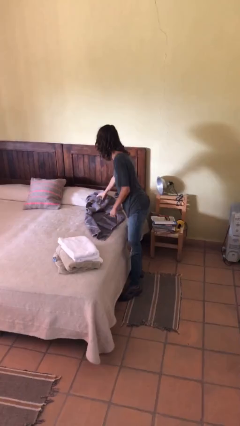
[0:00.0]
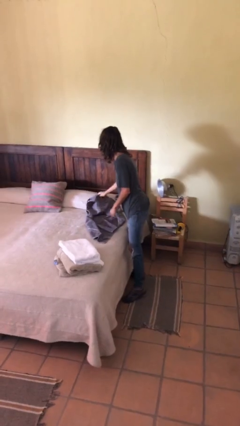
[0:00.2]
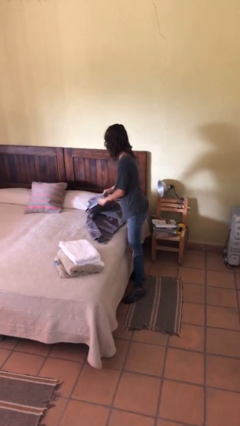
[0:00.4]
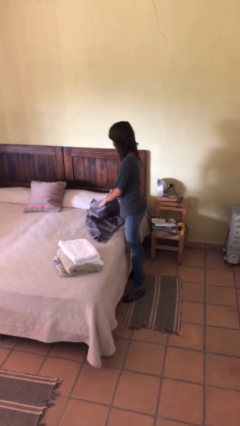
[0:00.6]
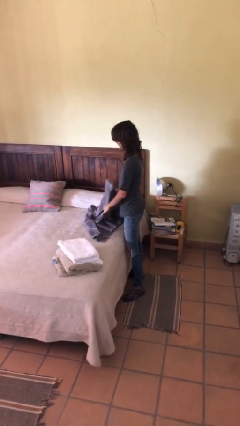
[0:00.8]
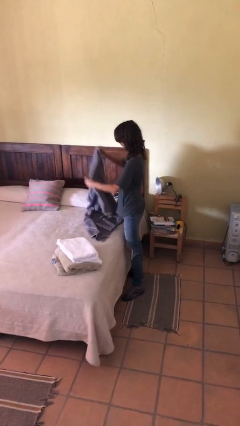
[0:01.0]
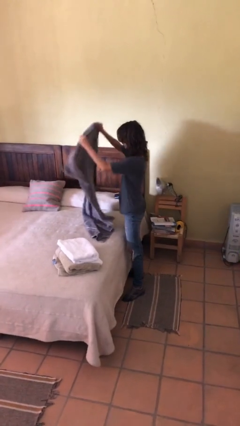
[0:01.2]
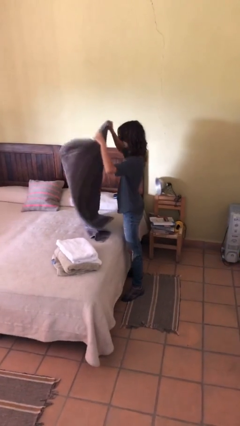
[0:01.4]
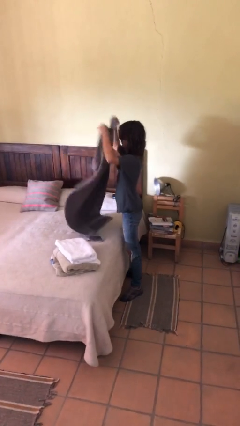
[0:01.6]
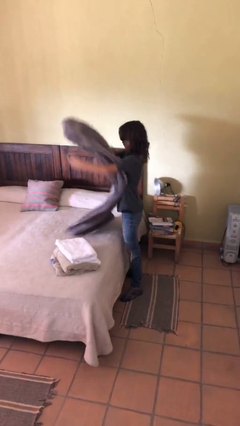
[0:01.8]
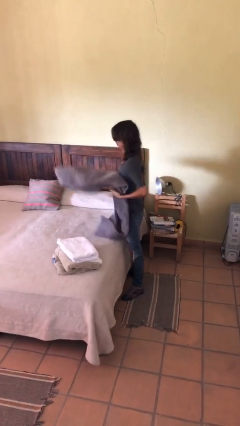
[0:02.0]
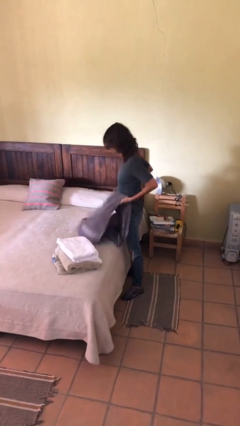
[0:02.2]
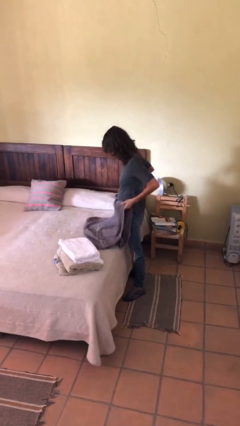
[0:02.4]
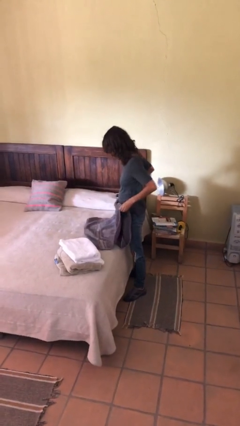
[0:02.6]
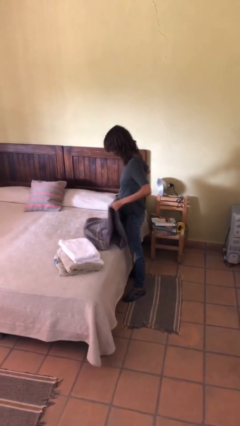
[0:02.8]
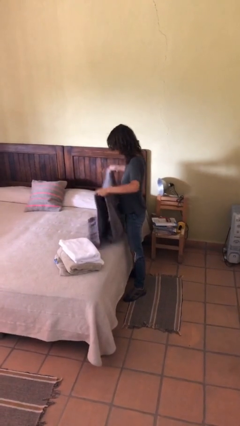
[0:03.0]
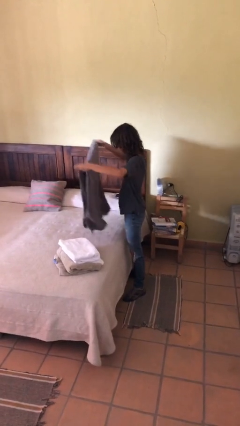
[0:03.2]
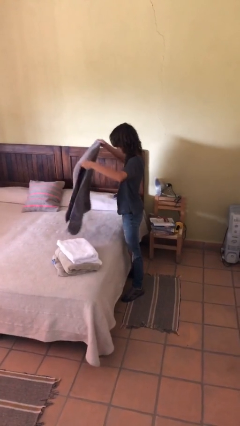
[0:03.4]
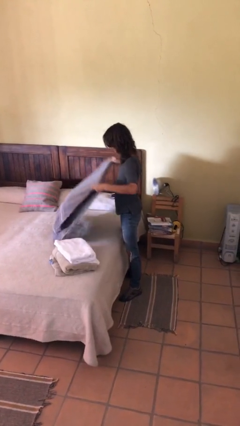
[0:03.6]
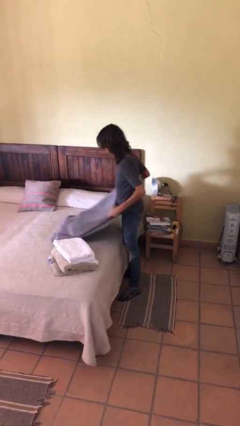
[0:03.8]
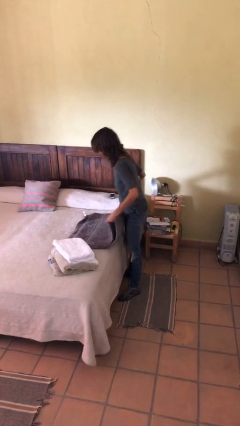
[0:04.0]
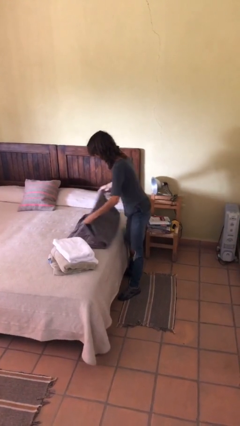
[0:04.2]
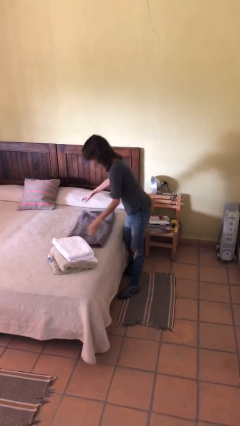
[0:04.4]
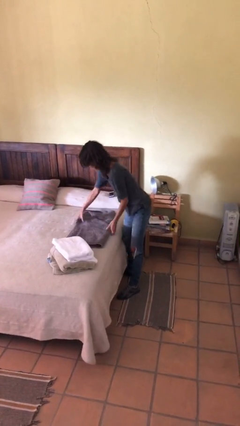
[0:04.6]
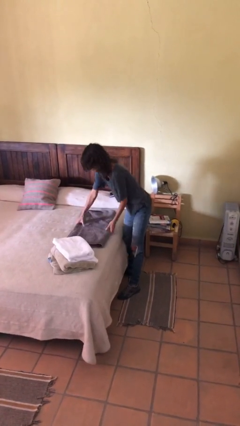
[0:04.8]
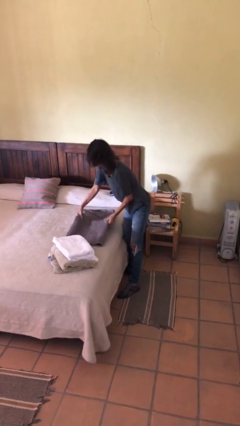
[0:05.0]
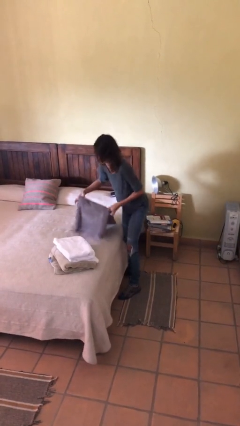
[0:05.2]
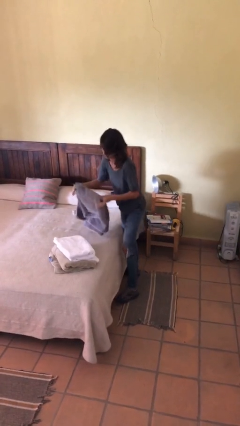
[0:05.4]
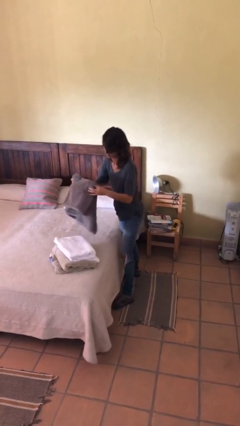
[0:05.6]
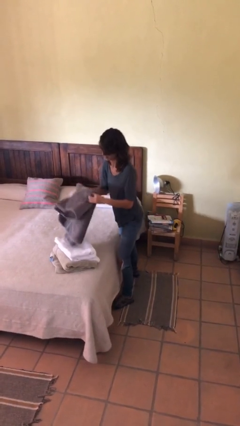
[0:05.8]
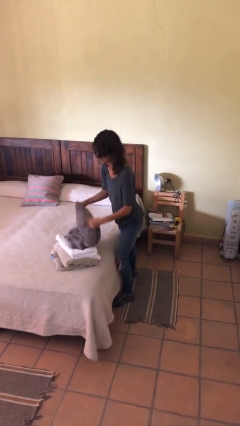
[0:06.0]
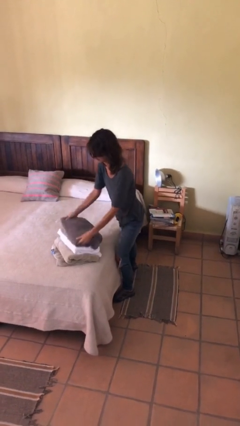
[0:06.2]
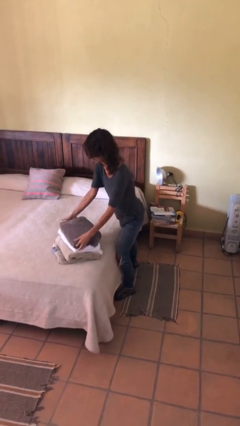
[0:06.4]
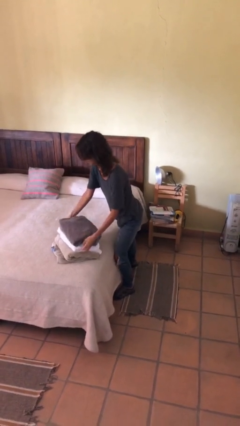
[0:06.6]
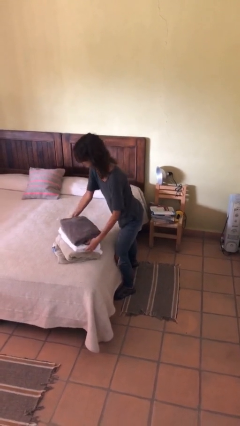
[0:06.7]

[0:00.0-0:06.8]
person folds towel

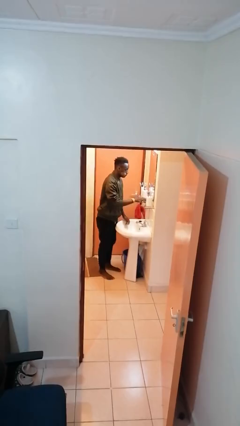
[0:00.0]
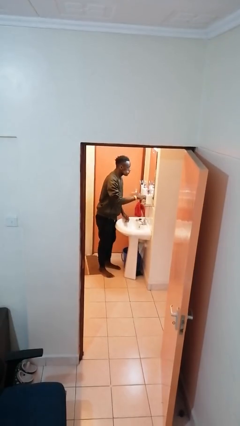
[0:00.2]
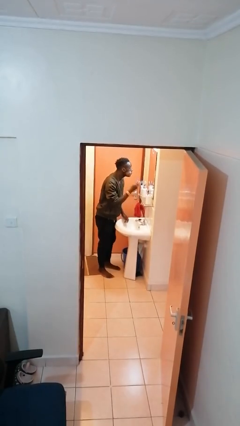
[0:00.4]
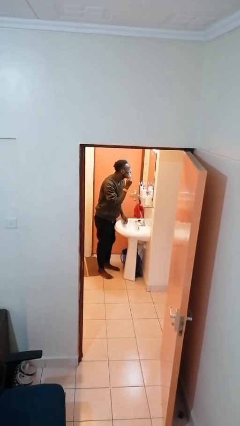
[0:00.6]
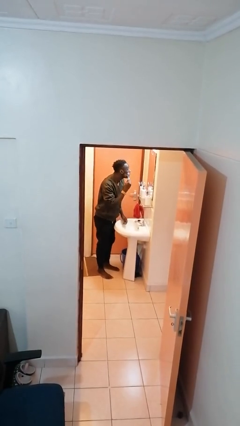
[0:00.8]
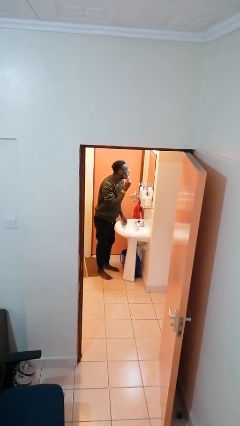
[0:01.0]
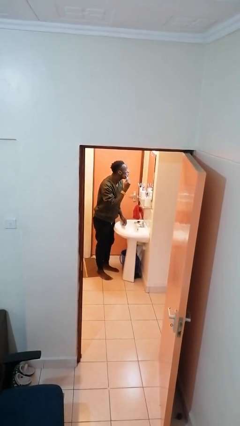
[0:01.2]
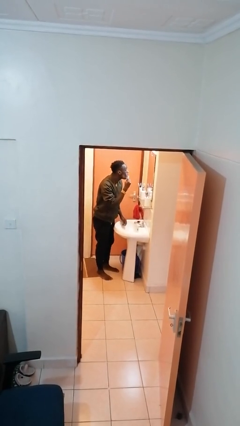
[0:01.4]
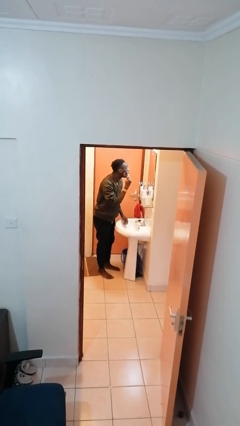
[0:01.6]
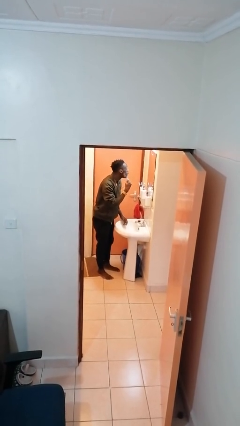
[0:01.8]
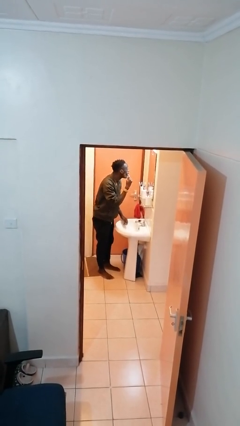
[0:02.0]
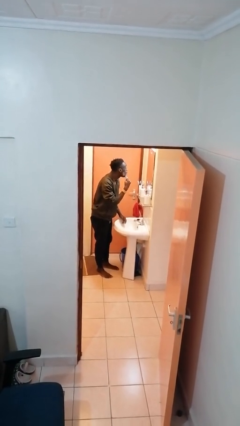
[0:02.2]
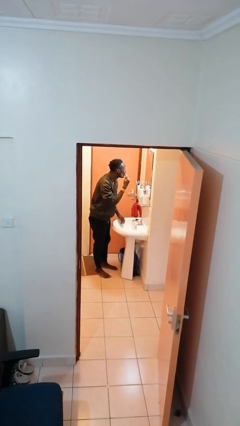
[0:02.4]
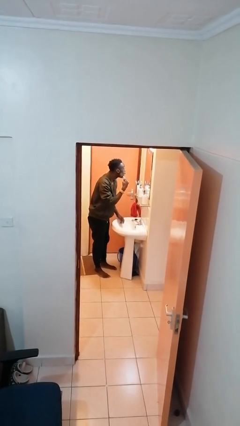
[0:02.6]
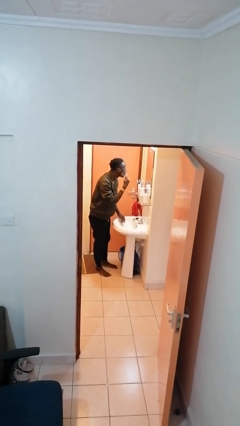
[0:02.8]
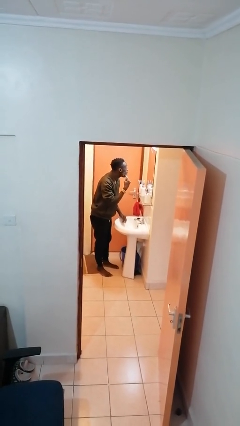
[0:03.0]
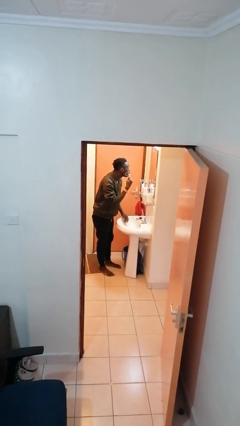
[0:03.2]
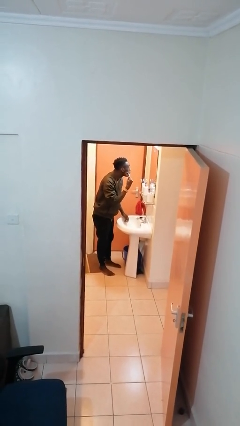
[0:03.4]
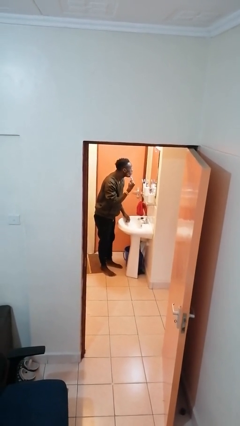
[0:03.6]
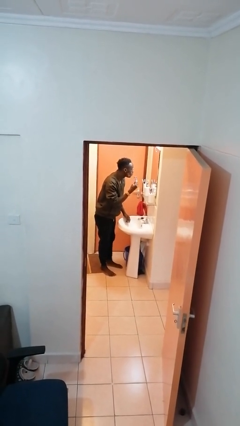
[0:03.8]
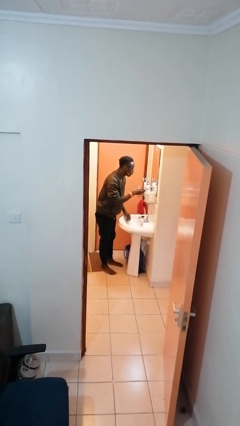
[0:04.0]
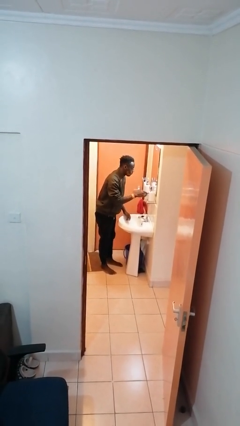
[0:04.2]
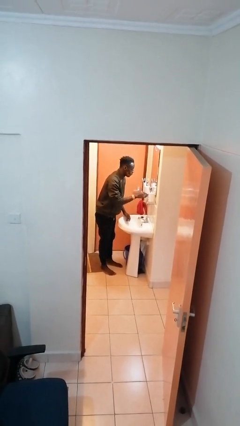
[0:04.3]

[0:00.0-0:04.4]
person shaves face

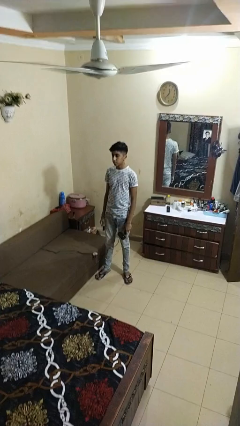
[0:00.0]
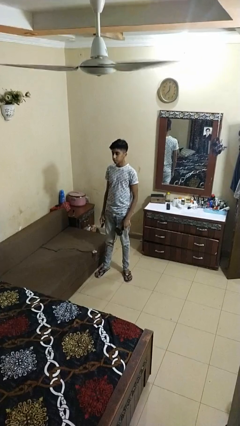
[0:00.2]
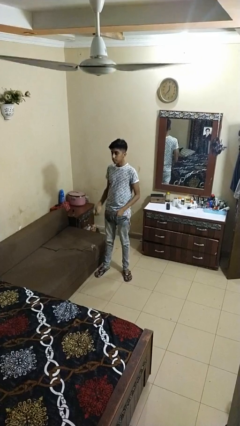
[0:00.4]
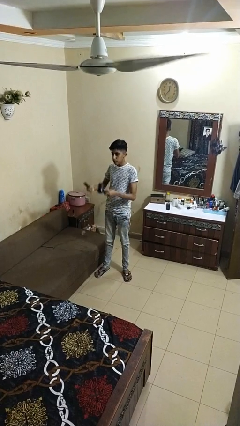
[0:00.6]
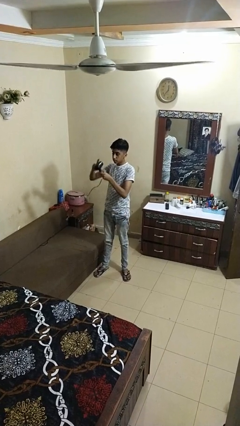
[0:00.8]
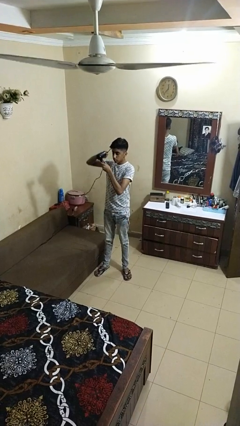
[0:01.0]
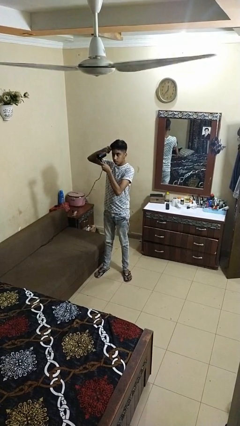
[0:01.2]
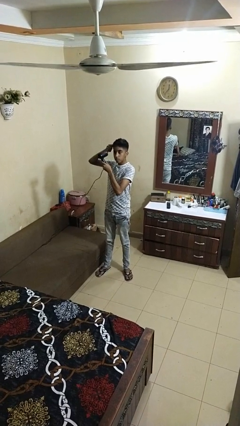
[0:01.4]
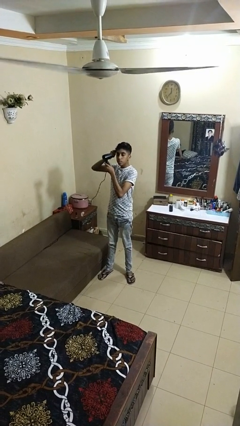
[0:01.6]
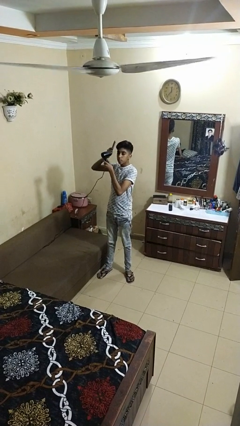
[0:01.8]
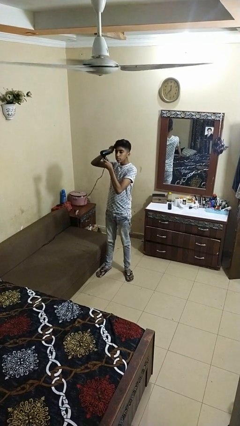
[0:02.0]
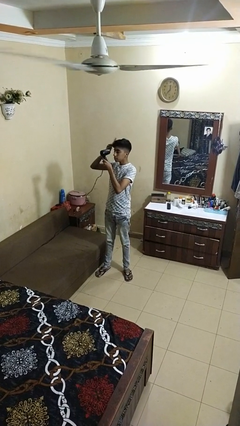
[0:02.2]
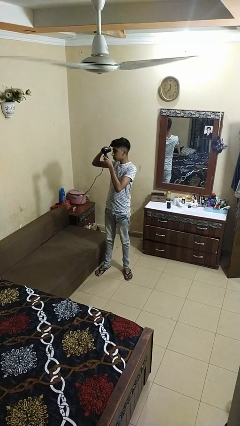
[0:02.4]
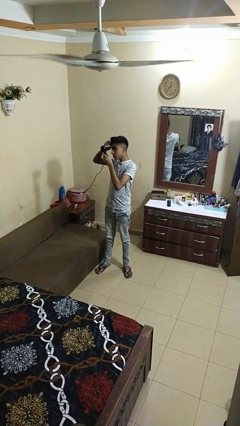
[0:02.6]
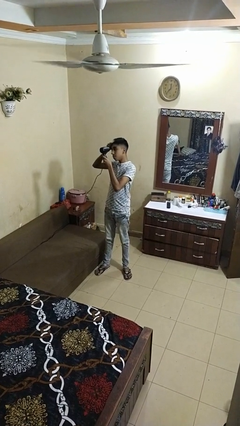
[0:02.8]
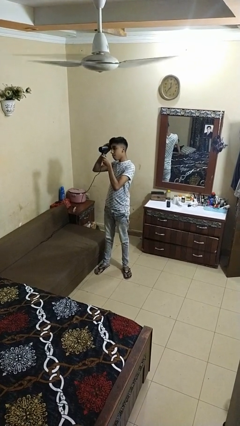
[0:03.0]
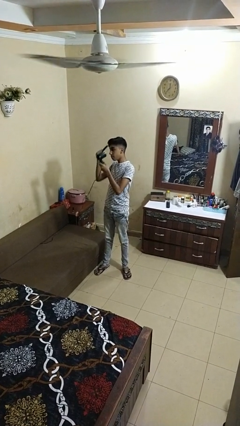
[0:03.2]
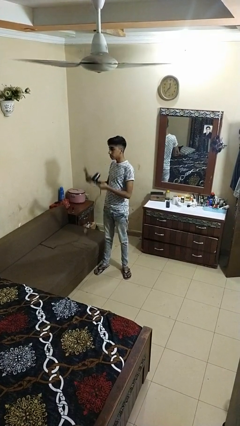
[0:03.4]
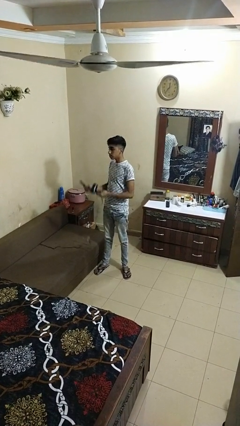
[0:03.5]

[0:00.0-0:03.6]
person dries hair with hairdryer

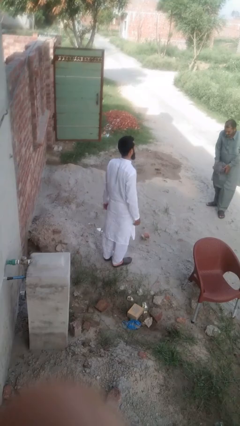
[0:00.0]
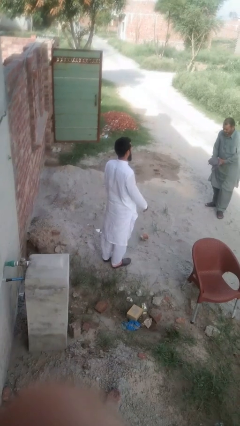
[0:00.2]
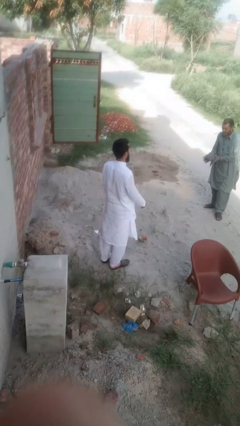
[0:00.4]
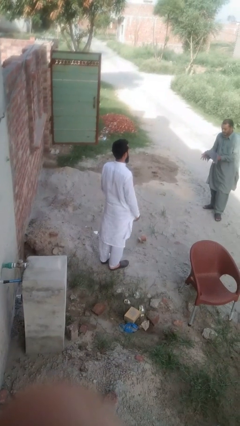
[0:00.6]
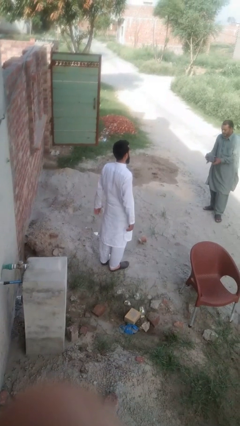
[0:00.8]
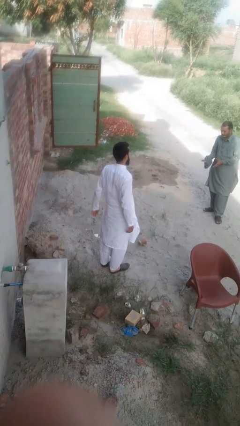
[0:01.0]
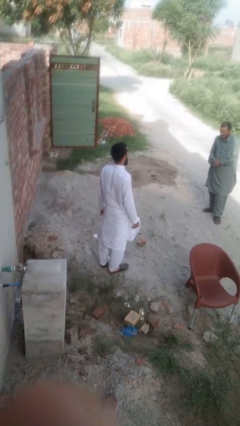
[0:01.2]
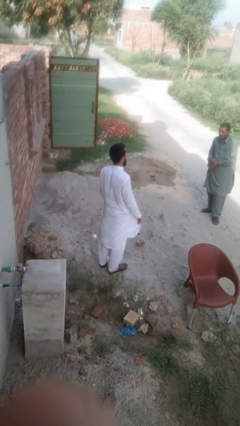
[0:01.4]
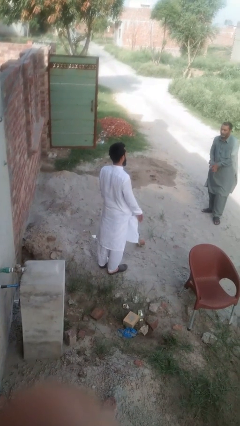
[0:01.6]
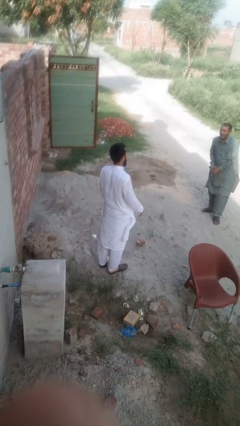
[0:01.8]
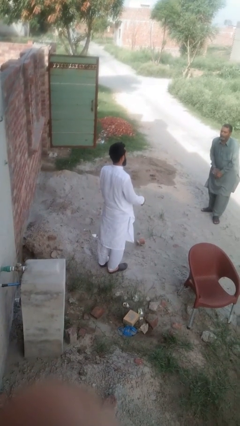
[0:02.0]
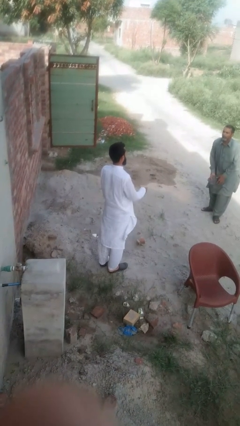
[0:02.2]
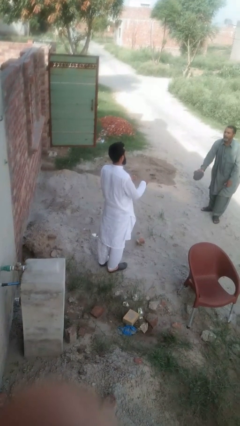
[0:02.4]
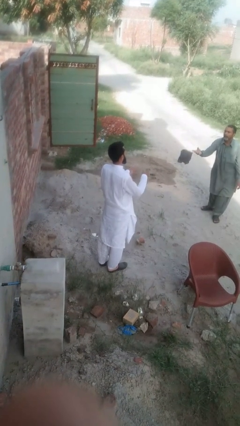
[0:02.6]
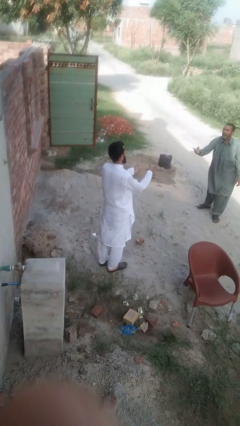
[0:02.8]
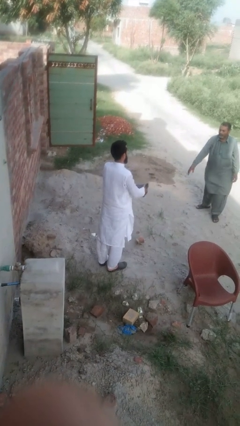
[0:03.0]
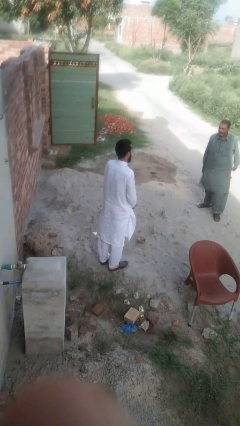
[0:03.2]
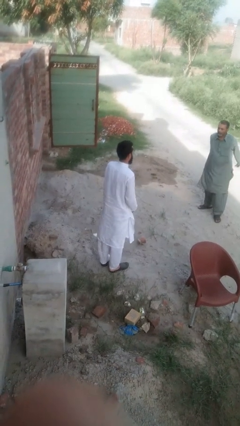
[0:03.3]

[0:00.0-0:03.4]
person catches object from person
